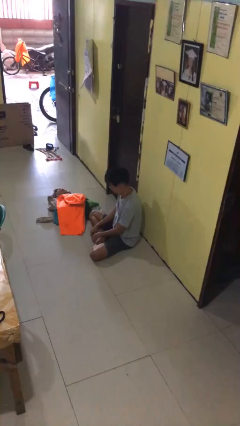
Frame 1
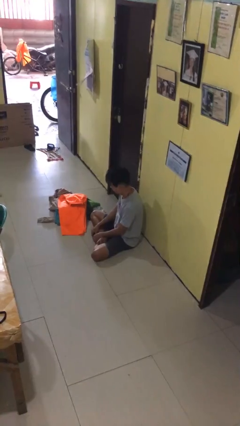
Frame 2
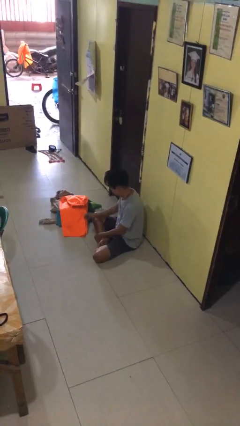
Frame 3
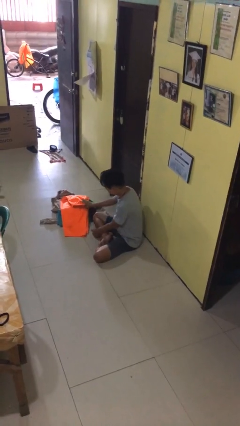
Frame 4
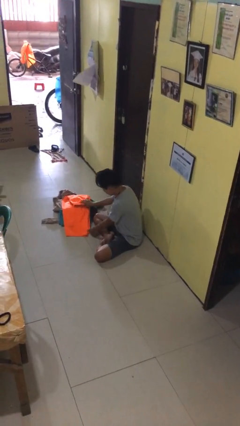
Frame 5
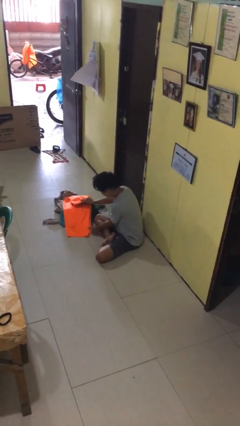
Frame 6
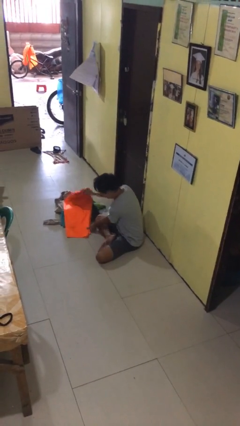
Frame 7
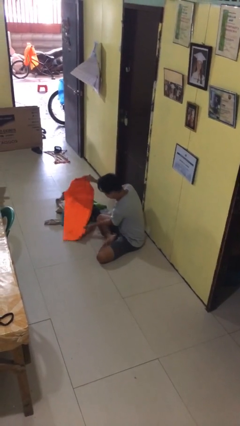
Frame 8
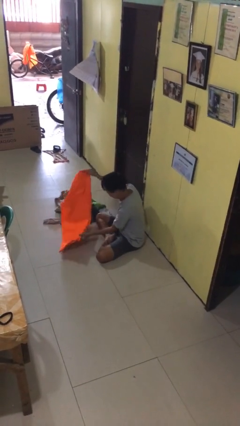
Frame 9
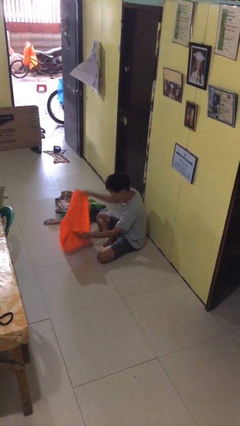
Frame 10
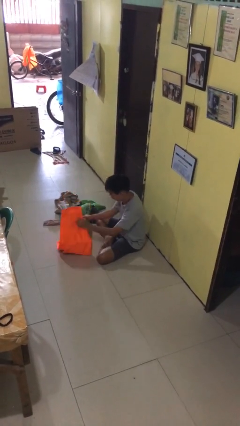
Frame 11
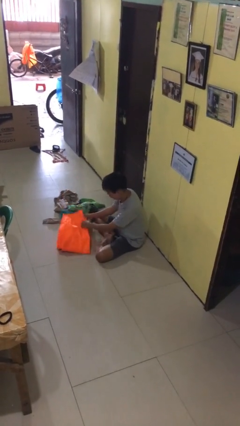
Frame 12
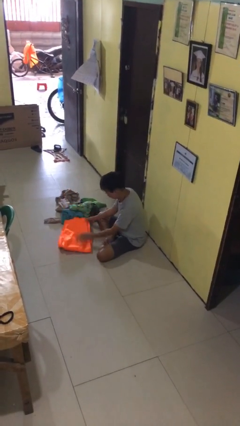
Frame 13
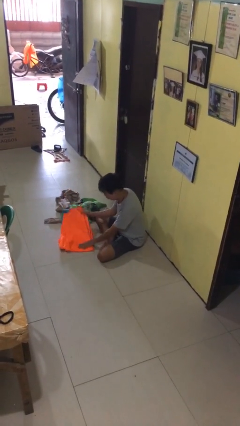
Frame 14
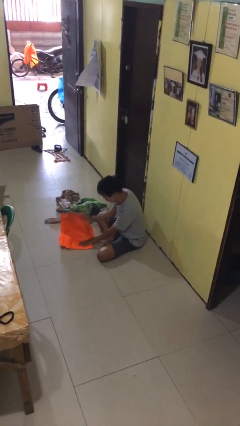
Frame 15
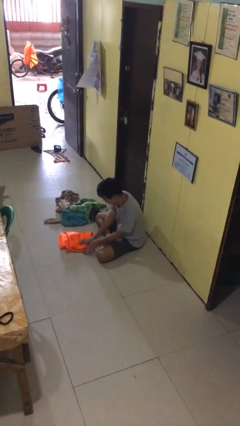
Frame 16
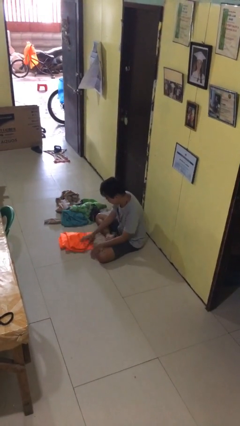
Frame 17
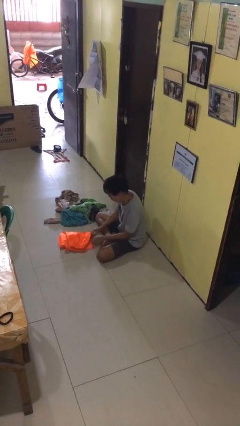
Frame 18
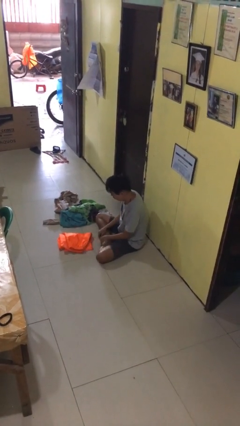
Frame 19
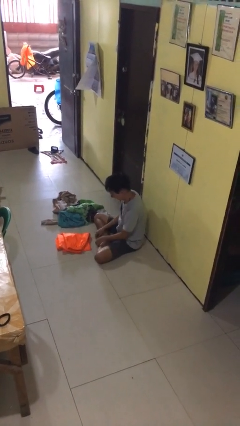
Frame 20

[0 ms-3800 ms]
person folds pants

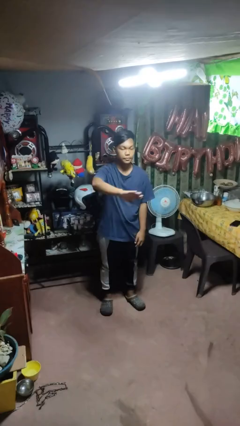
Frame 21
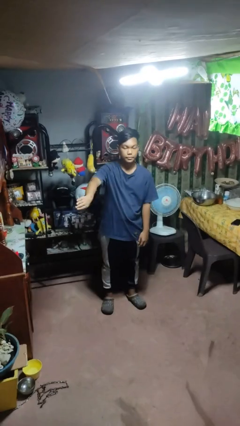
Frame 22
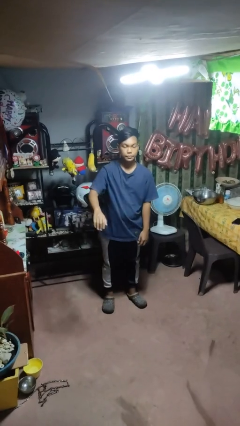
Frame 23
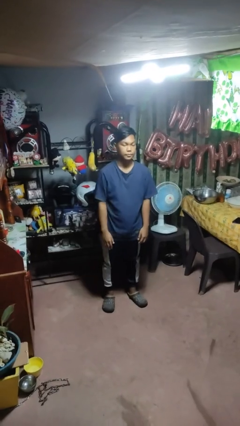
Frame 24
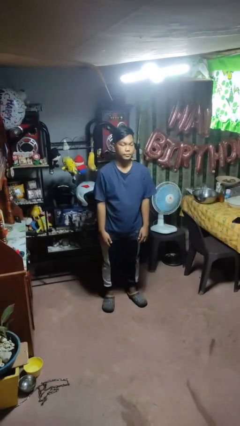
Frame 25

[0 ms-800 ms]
person gestures swipe right

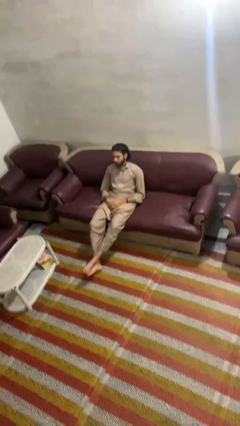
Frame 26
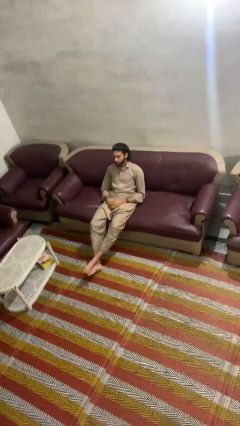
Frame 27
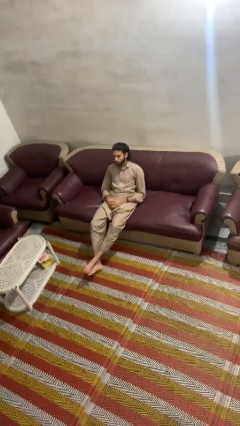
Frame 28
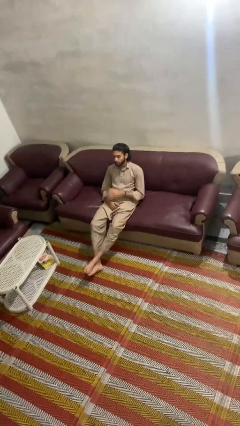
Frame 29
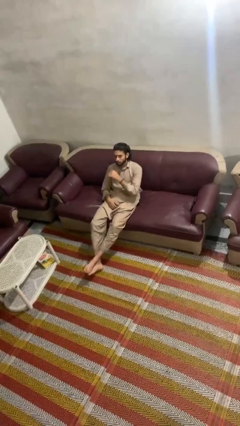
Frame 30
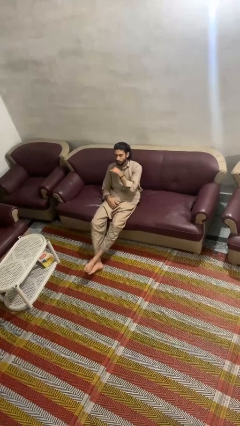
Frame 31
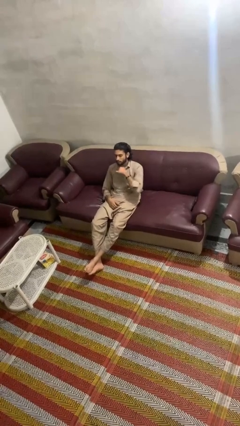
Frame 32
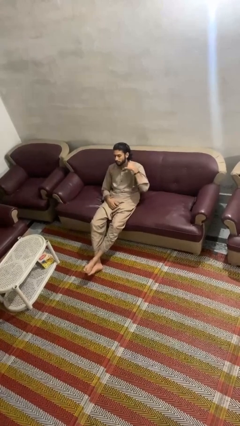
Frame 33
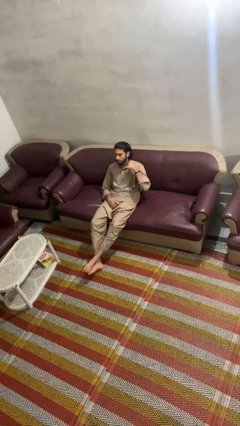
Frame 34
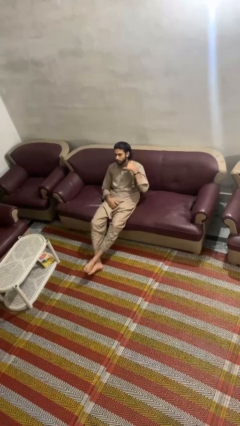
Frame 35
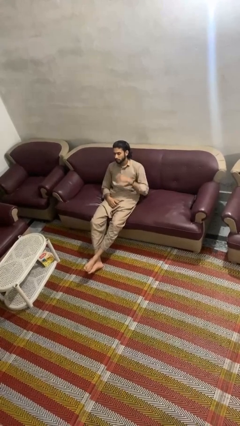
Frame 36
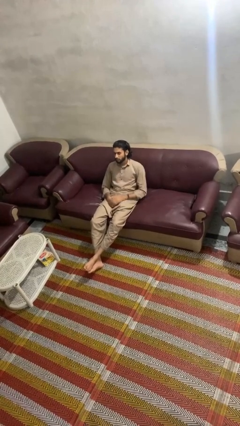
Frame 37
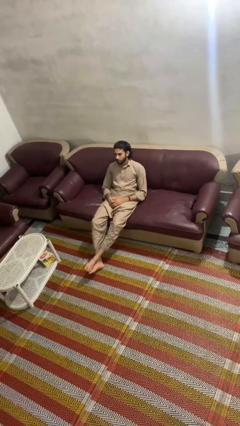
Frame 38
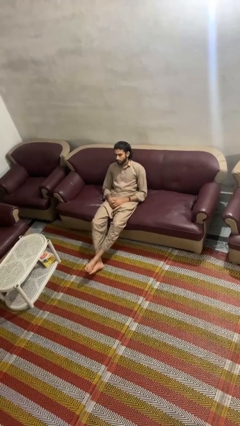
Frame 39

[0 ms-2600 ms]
person gestures cut

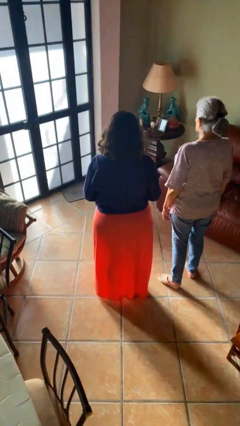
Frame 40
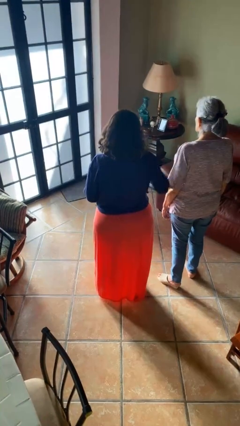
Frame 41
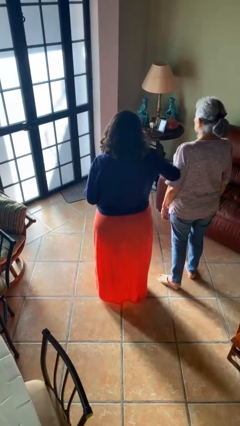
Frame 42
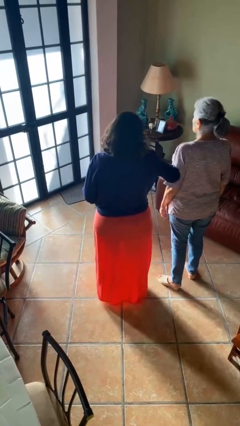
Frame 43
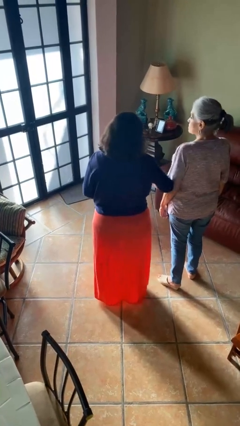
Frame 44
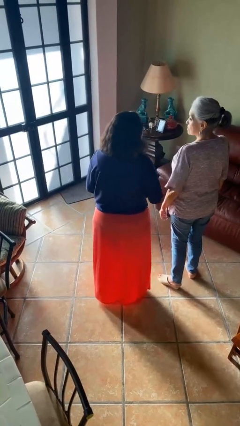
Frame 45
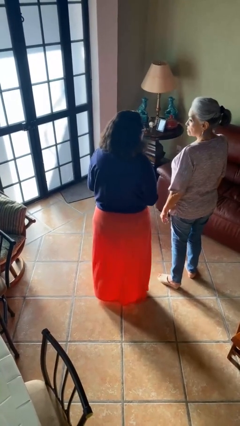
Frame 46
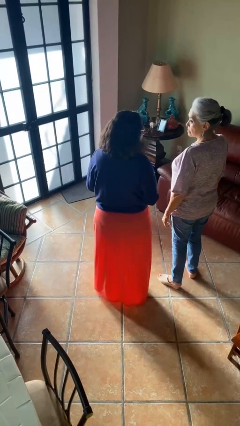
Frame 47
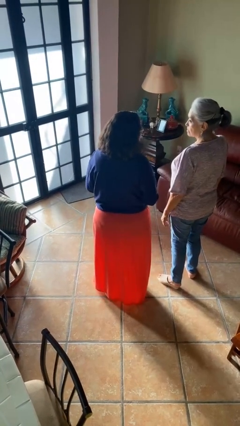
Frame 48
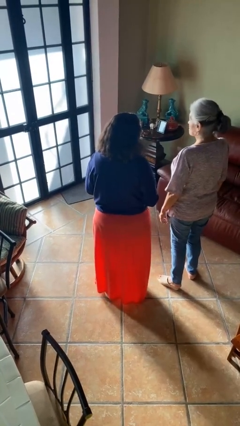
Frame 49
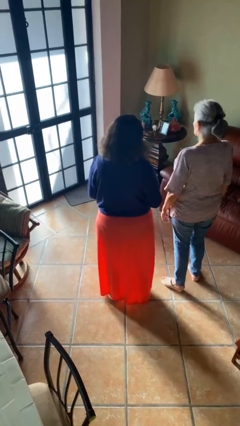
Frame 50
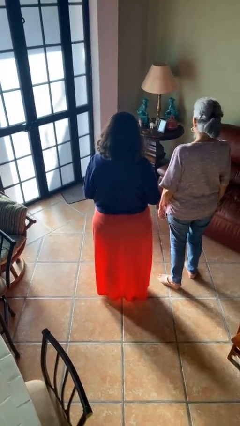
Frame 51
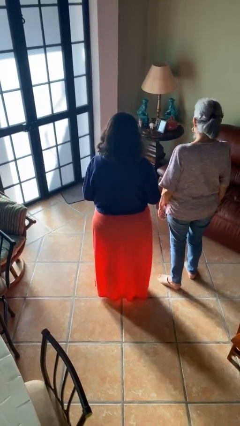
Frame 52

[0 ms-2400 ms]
person nudges person with elbow

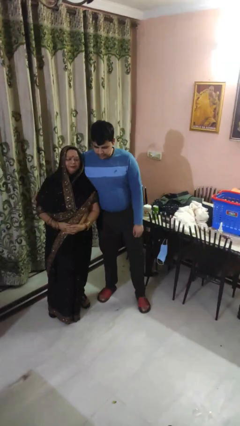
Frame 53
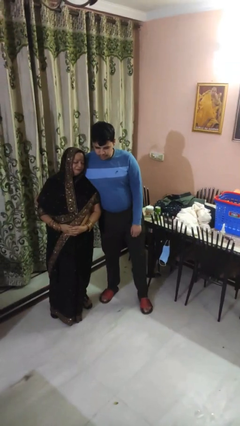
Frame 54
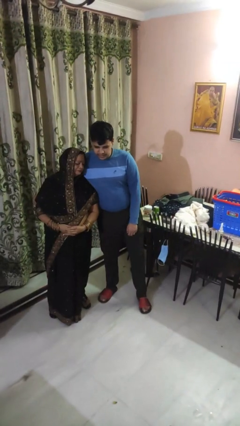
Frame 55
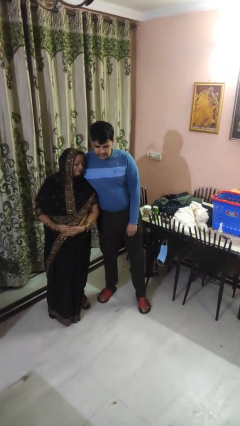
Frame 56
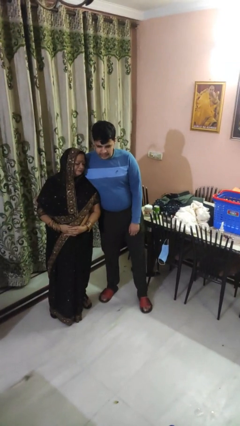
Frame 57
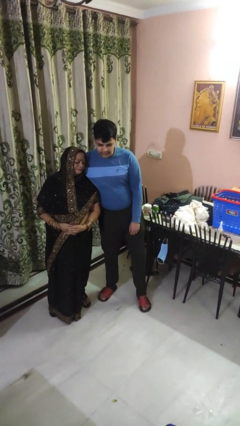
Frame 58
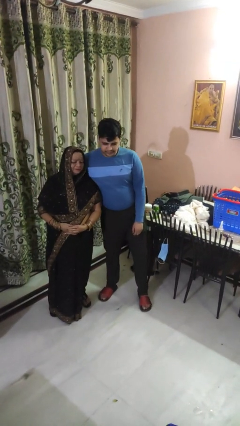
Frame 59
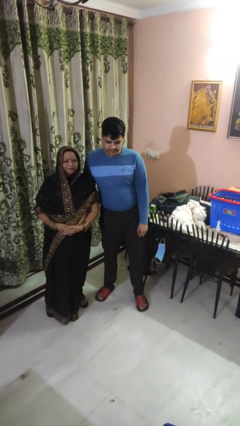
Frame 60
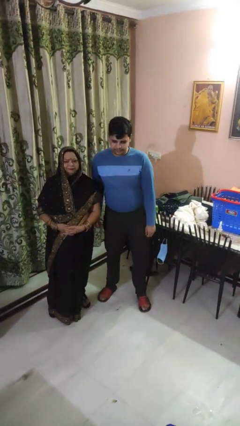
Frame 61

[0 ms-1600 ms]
person hugs person from side

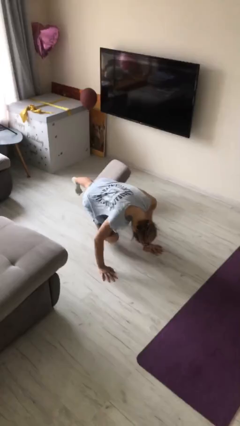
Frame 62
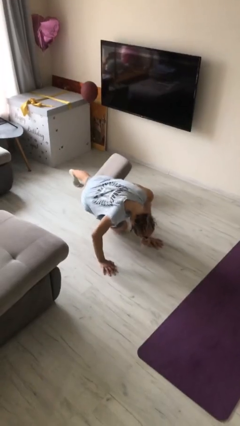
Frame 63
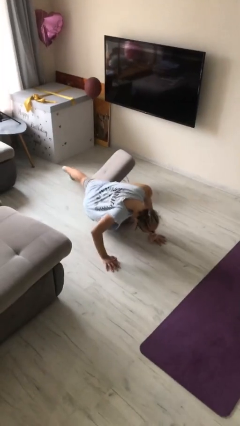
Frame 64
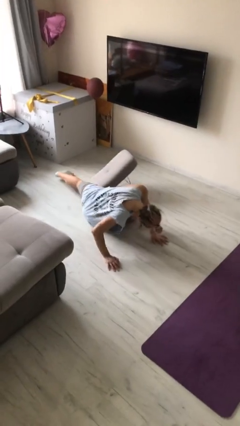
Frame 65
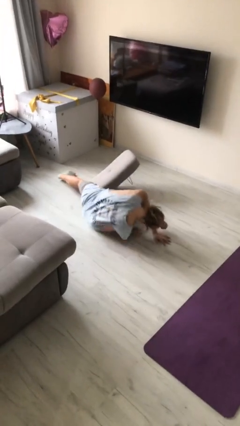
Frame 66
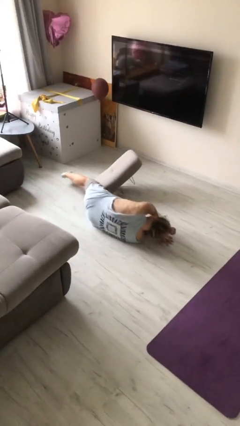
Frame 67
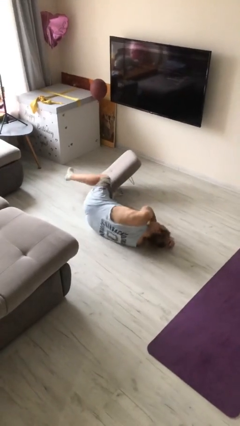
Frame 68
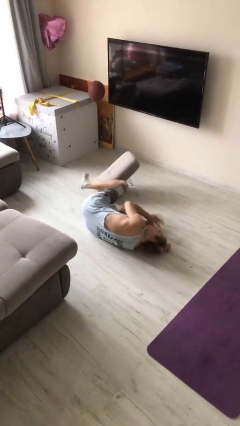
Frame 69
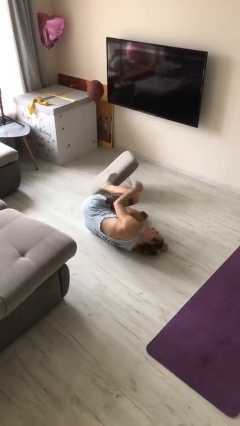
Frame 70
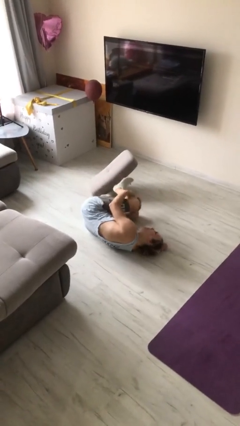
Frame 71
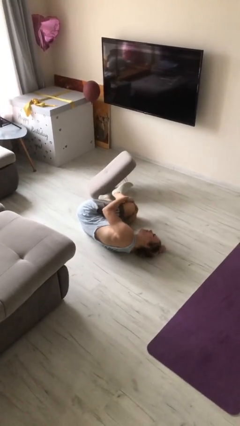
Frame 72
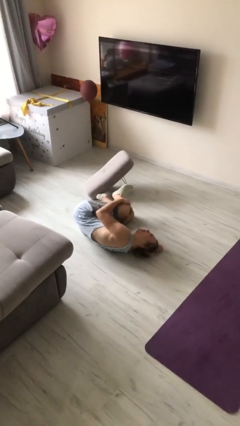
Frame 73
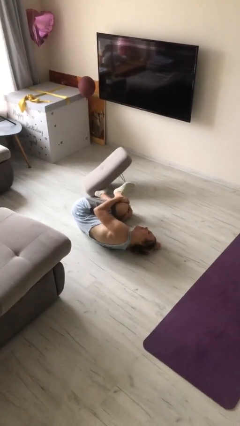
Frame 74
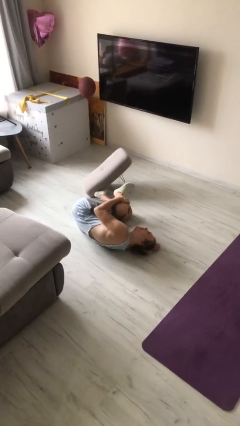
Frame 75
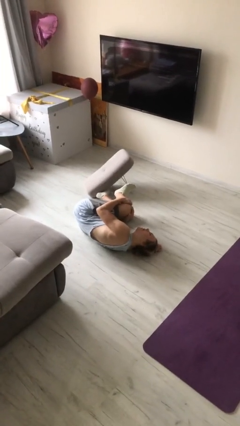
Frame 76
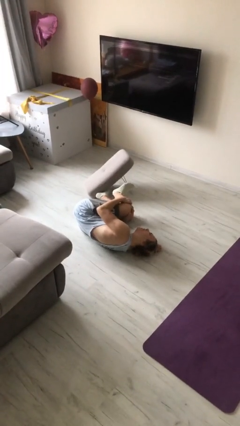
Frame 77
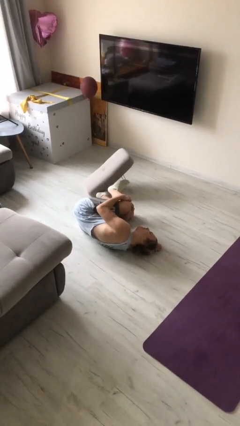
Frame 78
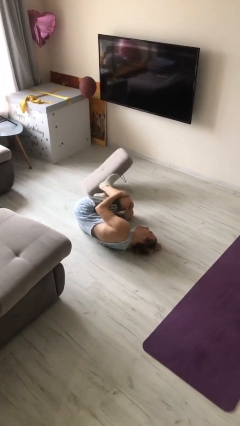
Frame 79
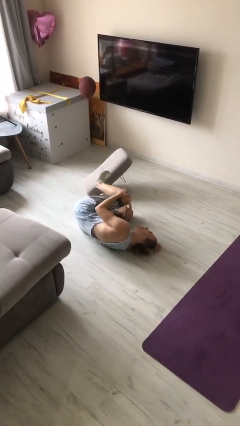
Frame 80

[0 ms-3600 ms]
person lies down on floor

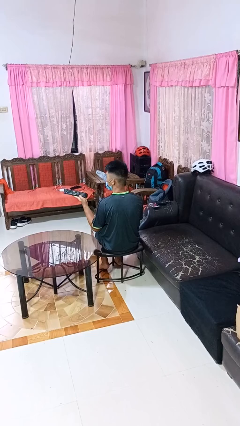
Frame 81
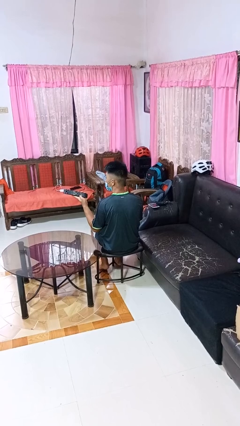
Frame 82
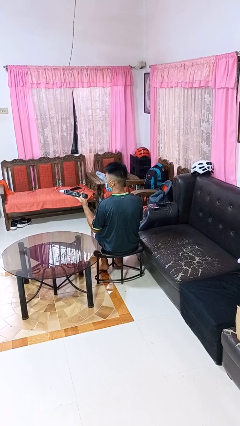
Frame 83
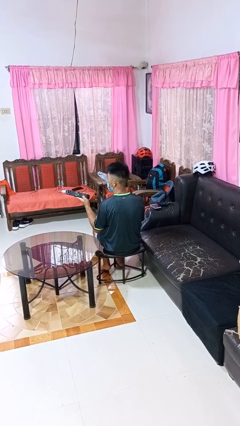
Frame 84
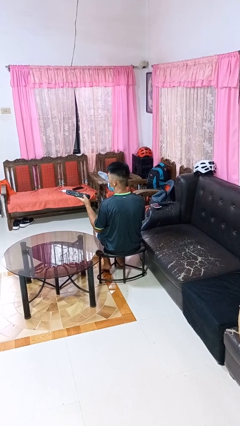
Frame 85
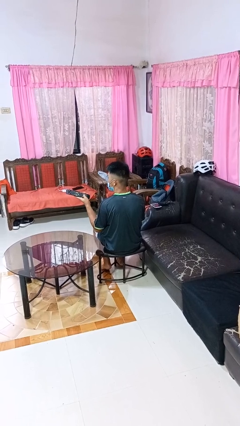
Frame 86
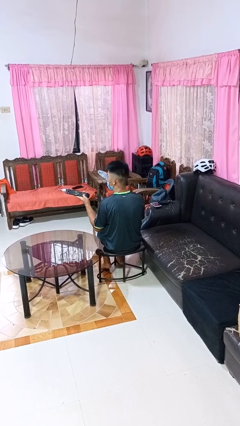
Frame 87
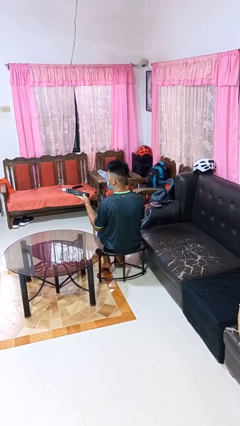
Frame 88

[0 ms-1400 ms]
person uses television remote

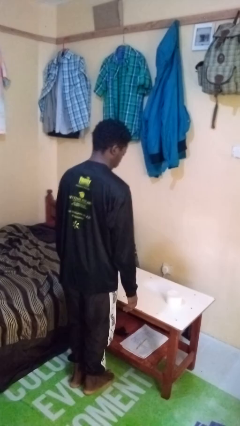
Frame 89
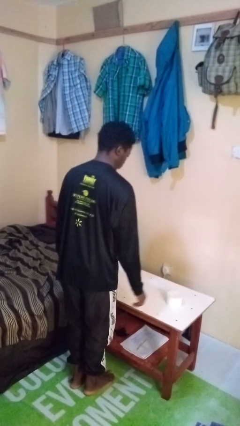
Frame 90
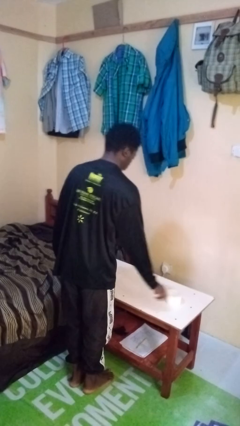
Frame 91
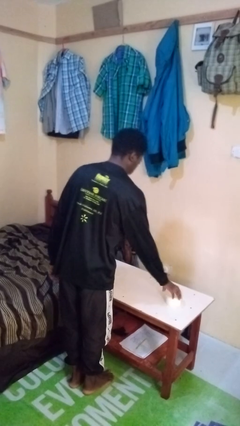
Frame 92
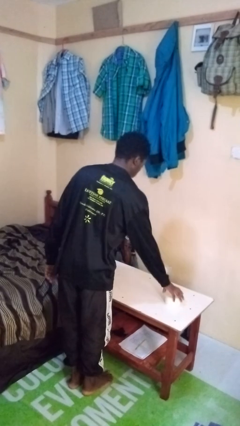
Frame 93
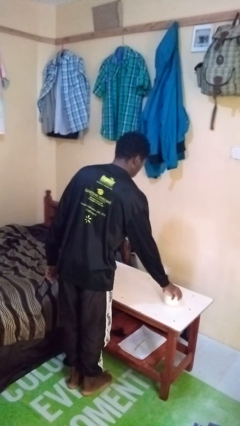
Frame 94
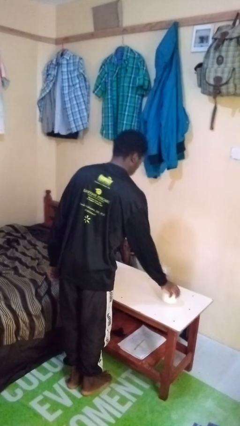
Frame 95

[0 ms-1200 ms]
person picks up object from table
